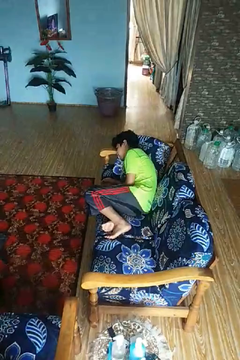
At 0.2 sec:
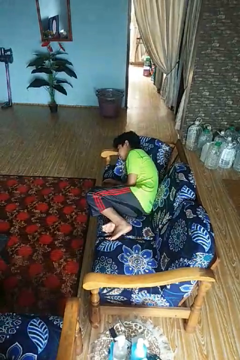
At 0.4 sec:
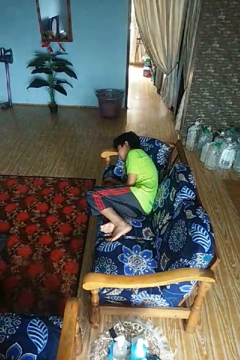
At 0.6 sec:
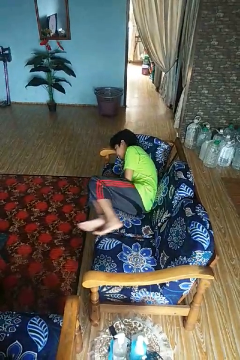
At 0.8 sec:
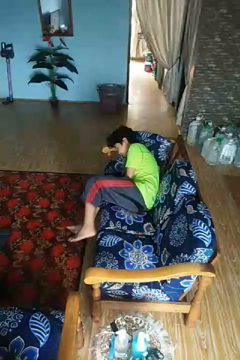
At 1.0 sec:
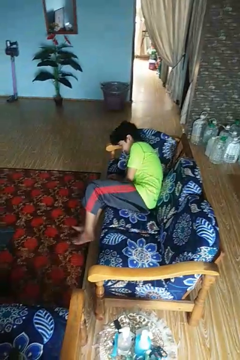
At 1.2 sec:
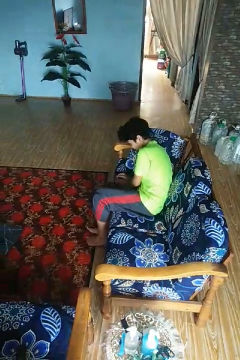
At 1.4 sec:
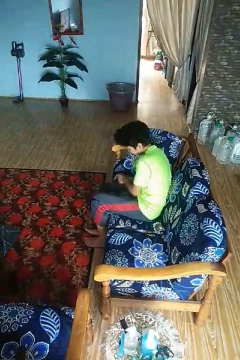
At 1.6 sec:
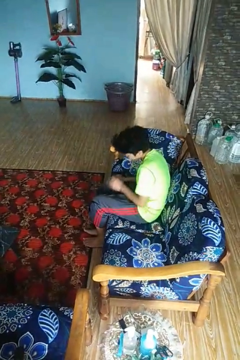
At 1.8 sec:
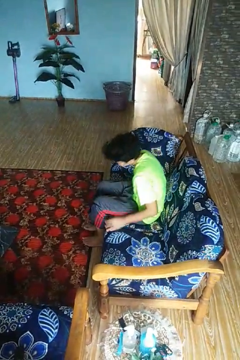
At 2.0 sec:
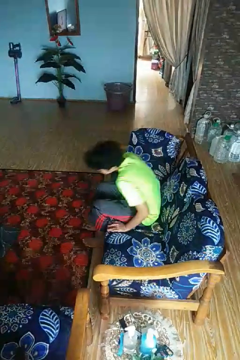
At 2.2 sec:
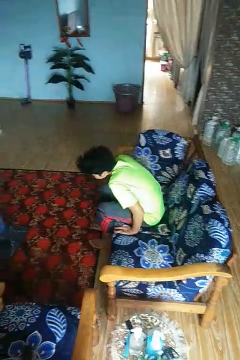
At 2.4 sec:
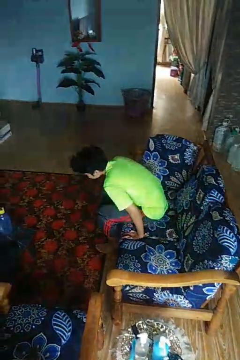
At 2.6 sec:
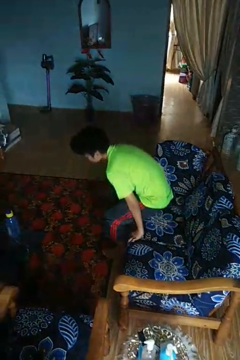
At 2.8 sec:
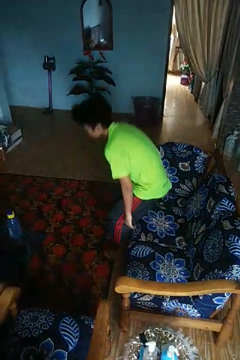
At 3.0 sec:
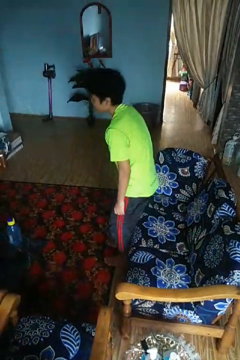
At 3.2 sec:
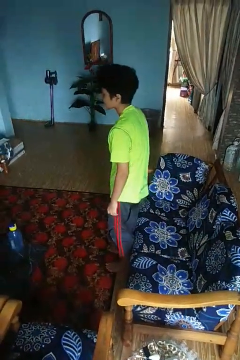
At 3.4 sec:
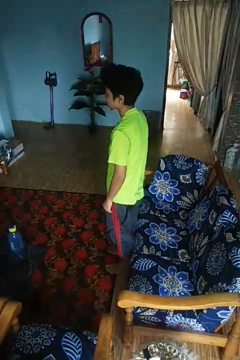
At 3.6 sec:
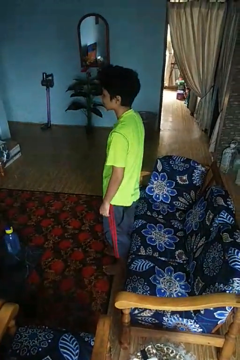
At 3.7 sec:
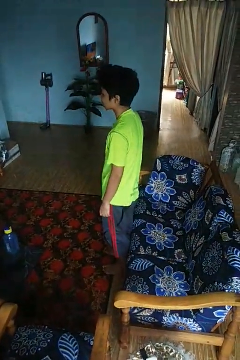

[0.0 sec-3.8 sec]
person stands up

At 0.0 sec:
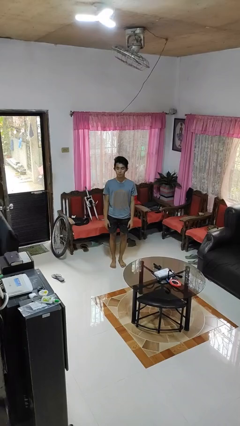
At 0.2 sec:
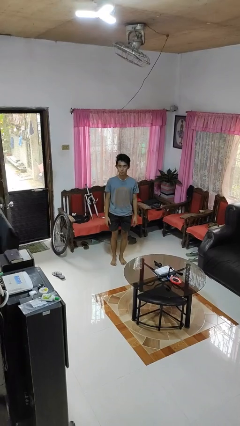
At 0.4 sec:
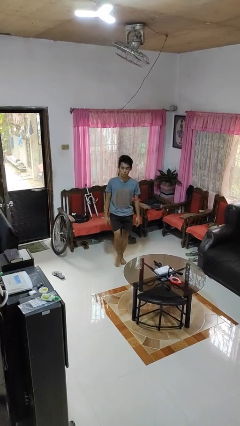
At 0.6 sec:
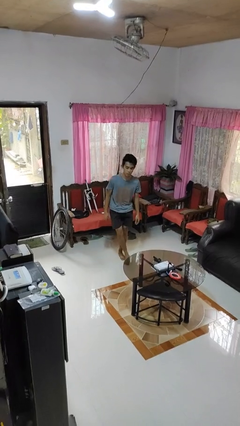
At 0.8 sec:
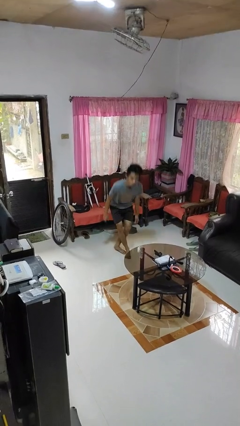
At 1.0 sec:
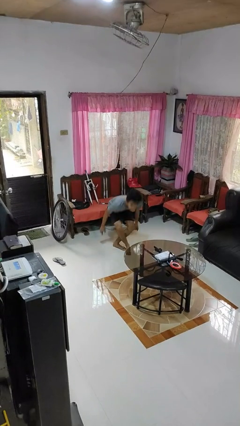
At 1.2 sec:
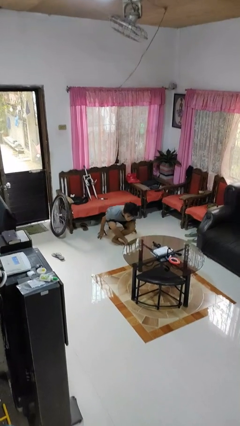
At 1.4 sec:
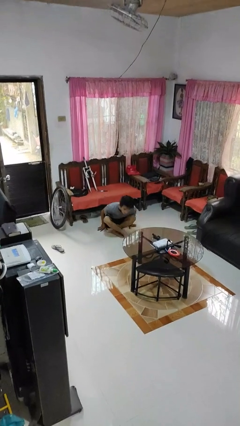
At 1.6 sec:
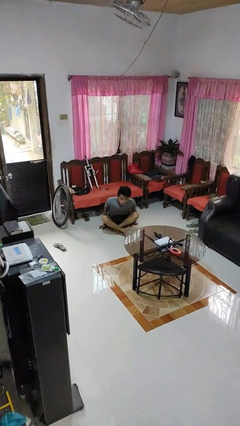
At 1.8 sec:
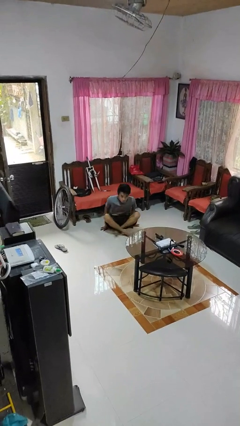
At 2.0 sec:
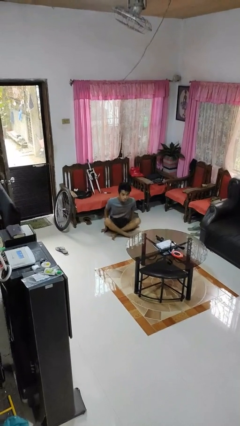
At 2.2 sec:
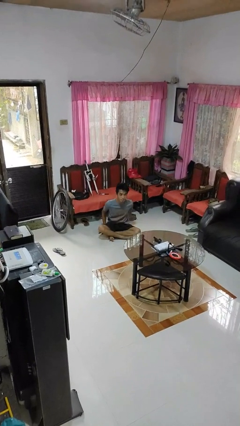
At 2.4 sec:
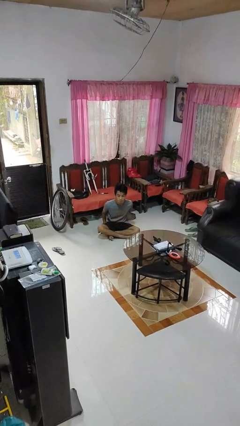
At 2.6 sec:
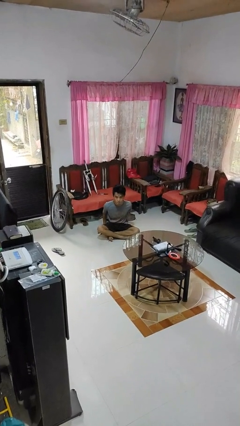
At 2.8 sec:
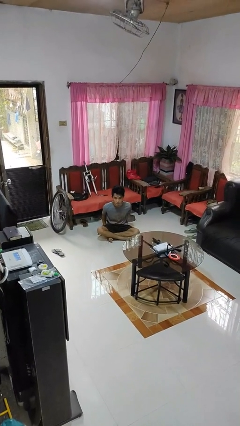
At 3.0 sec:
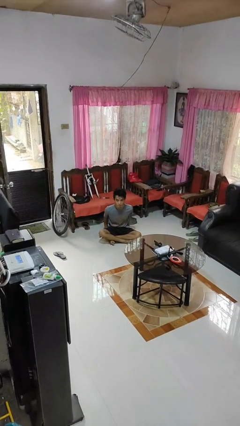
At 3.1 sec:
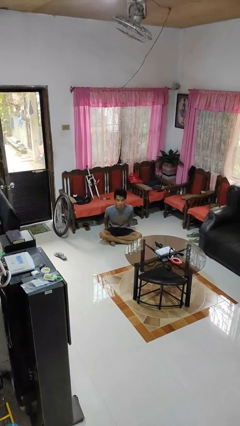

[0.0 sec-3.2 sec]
person sits crisscross

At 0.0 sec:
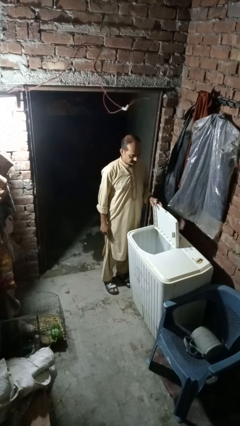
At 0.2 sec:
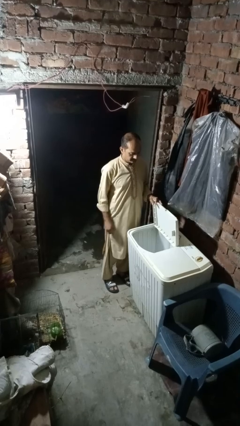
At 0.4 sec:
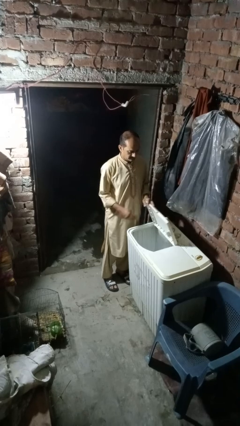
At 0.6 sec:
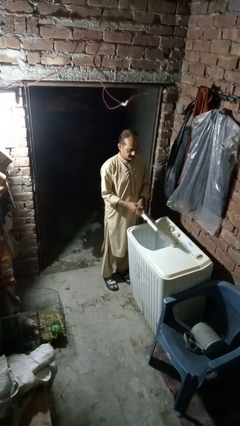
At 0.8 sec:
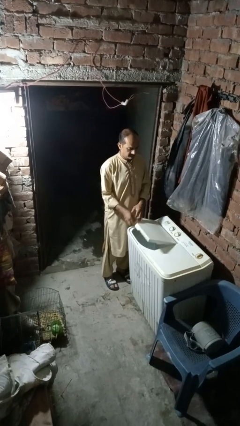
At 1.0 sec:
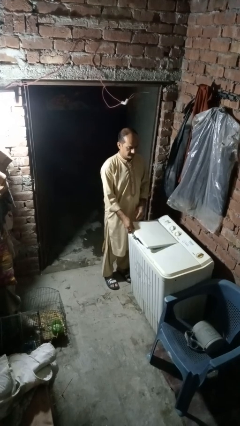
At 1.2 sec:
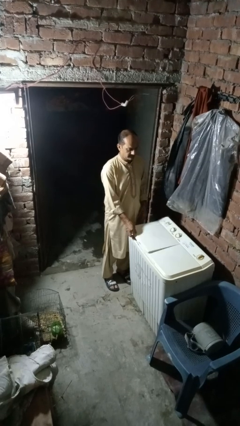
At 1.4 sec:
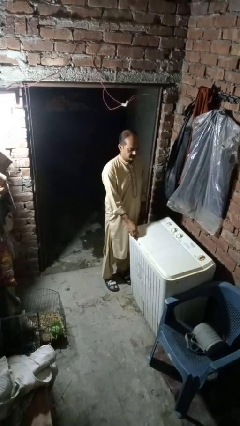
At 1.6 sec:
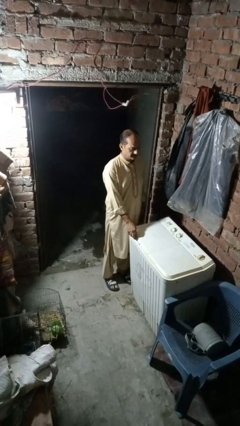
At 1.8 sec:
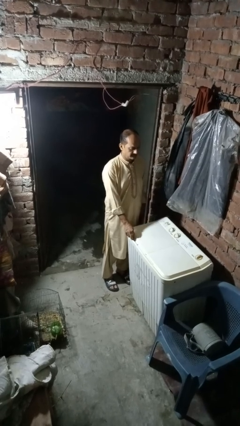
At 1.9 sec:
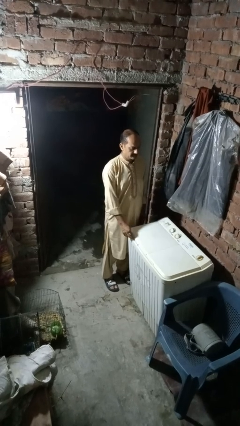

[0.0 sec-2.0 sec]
person closes clothes washer

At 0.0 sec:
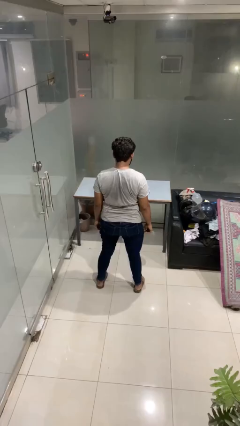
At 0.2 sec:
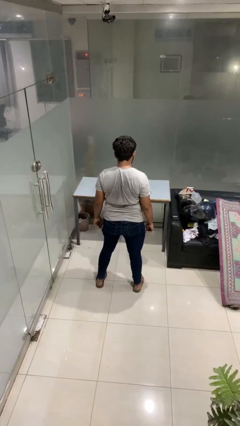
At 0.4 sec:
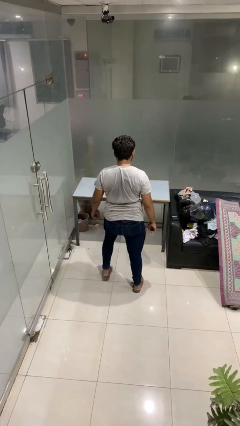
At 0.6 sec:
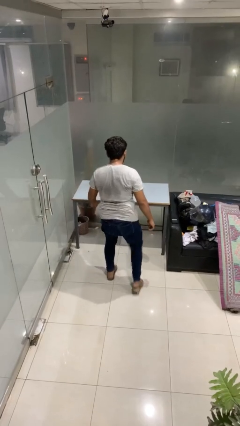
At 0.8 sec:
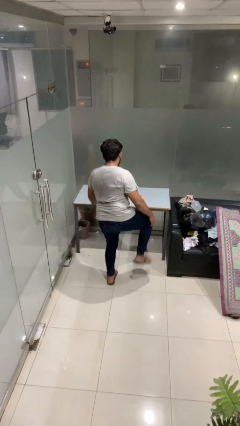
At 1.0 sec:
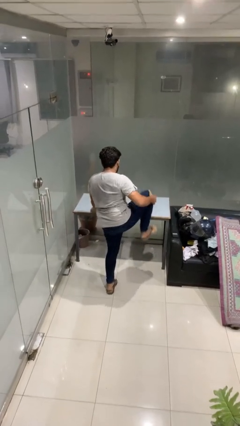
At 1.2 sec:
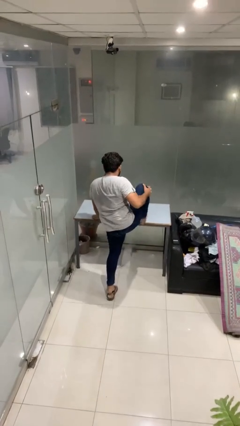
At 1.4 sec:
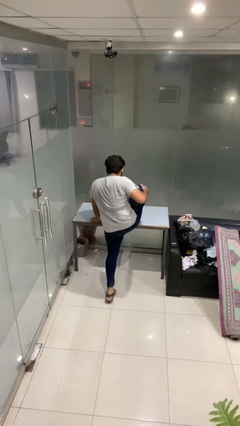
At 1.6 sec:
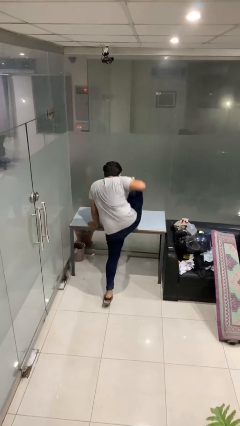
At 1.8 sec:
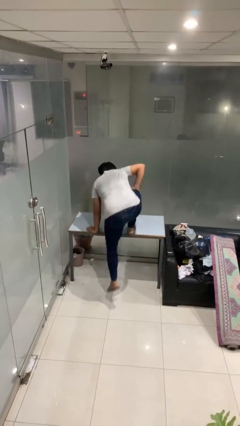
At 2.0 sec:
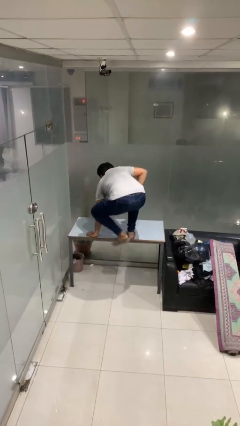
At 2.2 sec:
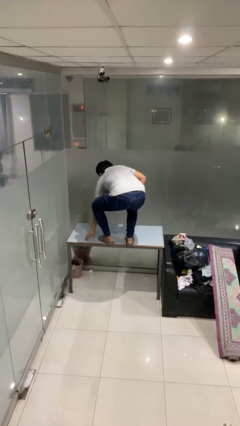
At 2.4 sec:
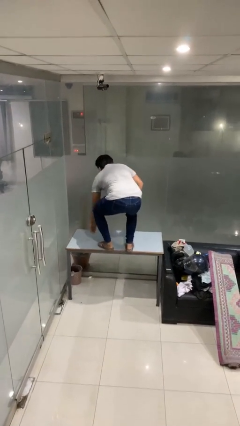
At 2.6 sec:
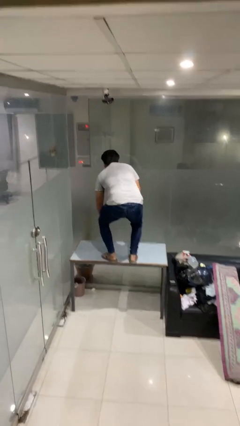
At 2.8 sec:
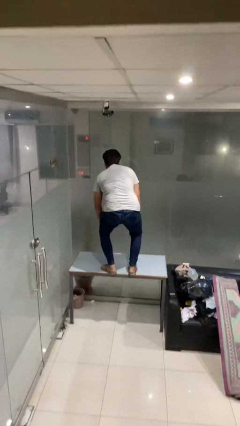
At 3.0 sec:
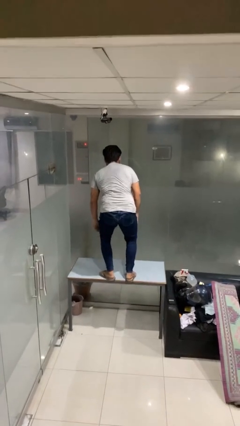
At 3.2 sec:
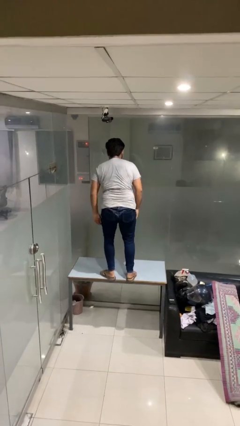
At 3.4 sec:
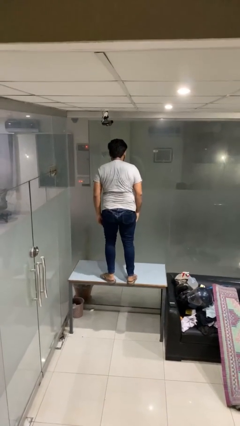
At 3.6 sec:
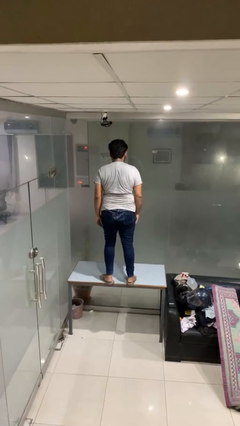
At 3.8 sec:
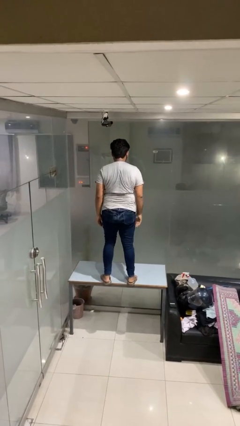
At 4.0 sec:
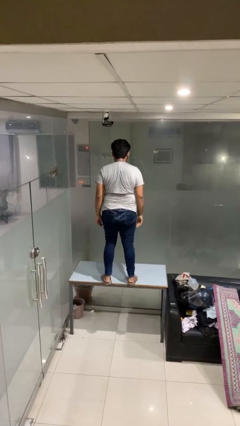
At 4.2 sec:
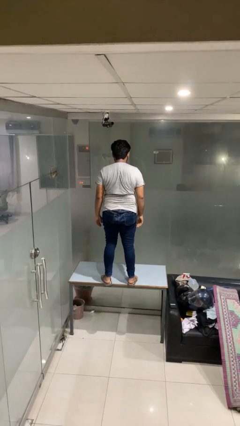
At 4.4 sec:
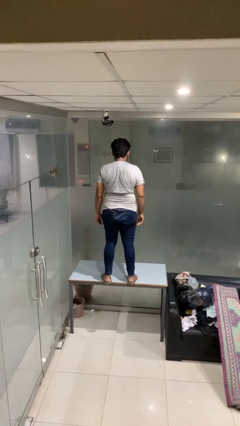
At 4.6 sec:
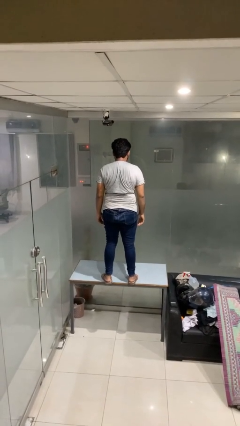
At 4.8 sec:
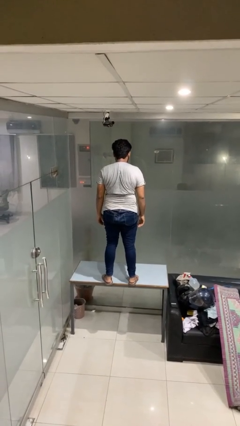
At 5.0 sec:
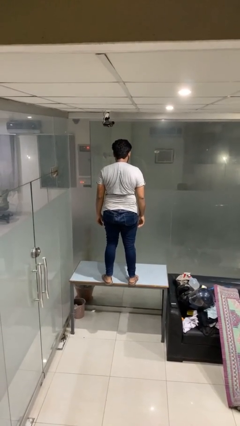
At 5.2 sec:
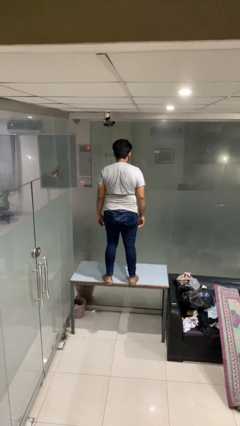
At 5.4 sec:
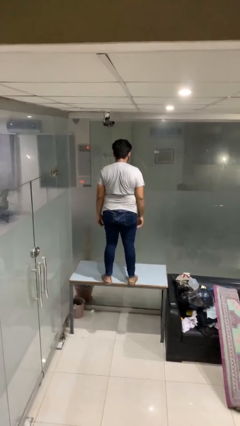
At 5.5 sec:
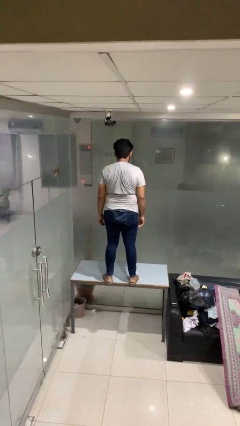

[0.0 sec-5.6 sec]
person climbs on table

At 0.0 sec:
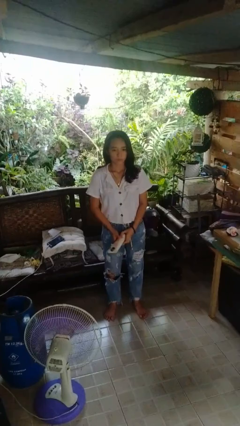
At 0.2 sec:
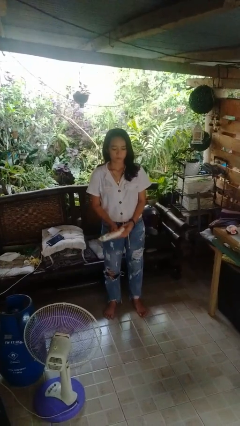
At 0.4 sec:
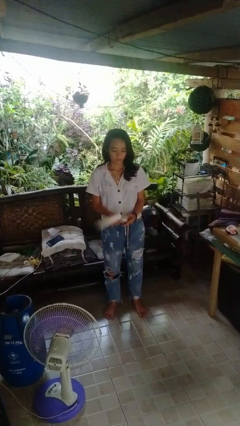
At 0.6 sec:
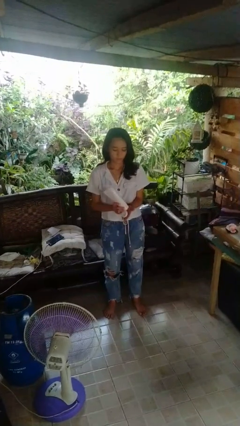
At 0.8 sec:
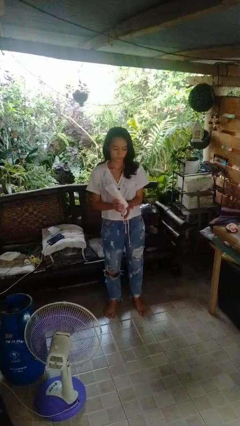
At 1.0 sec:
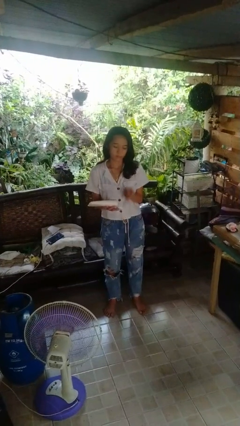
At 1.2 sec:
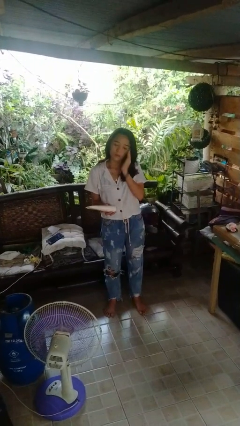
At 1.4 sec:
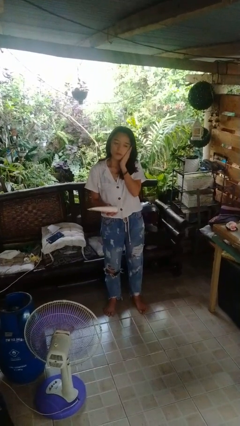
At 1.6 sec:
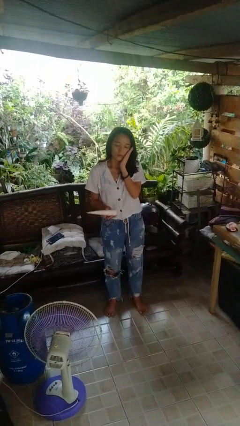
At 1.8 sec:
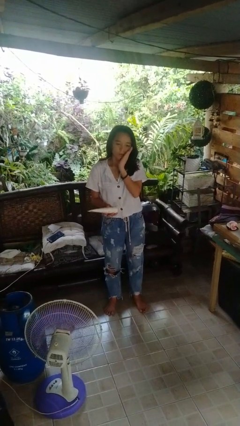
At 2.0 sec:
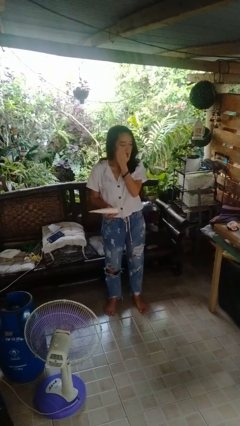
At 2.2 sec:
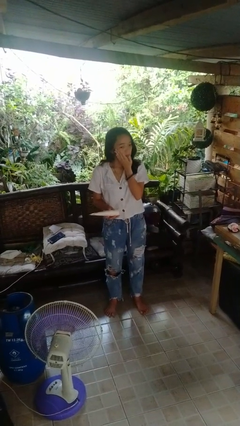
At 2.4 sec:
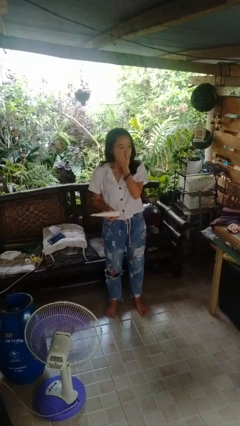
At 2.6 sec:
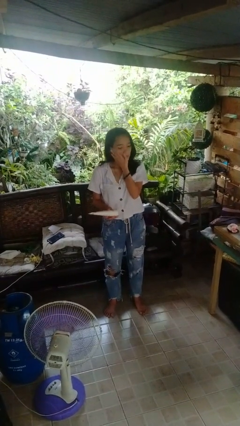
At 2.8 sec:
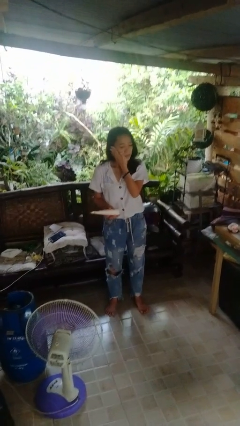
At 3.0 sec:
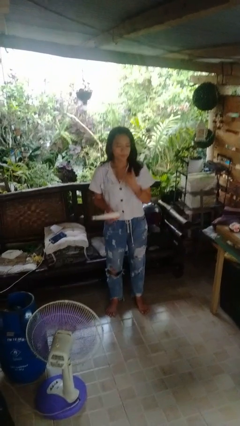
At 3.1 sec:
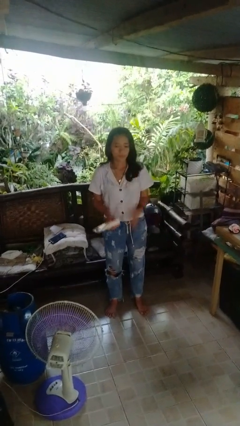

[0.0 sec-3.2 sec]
person applies sunscreen
